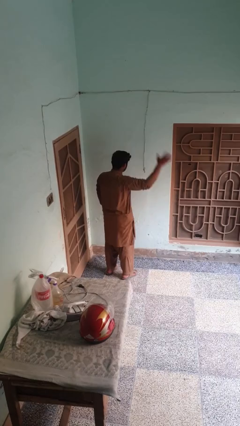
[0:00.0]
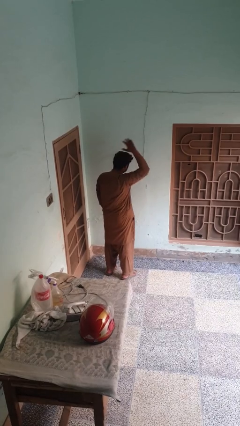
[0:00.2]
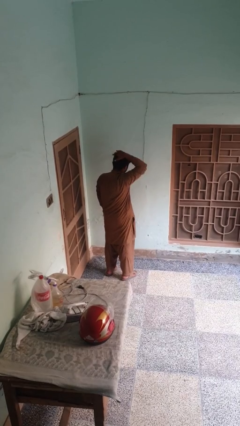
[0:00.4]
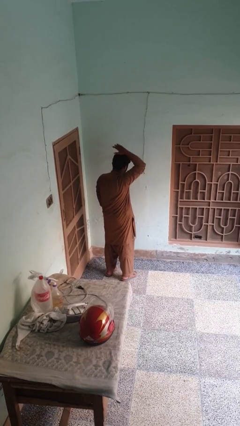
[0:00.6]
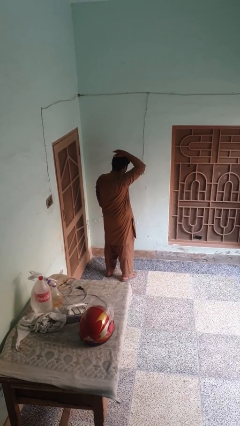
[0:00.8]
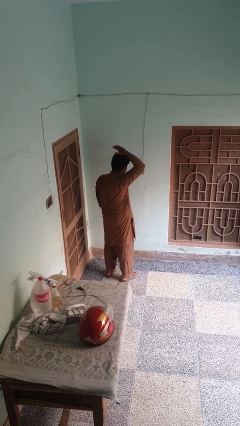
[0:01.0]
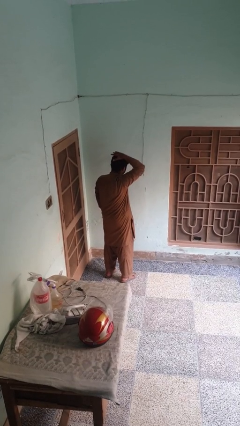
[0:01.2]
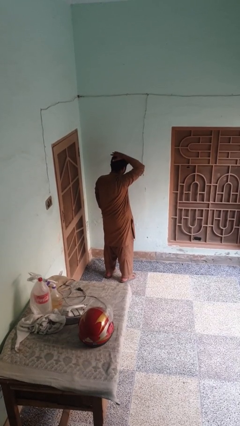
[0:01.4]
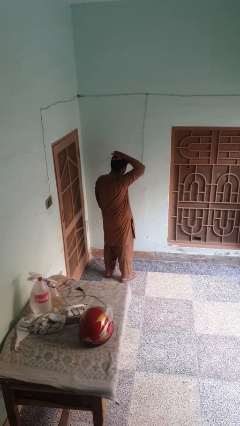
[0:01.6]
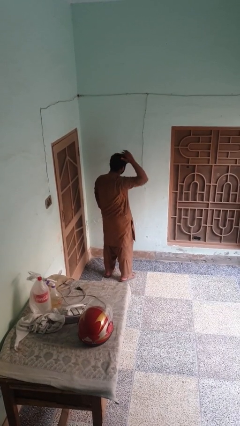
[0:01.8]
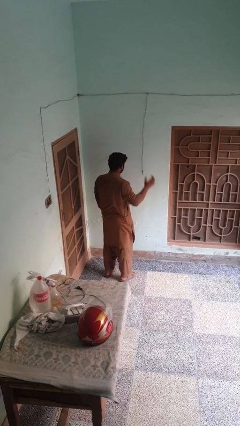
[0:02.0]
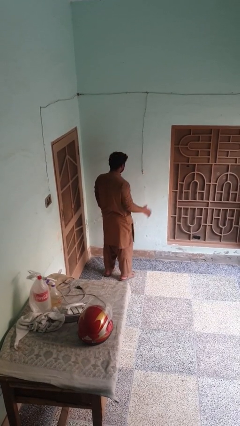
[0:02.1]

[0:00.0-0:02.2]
person pats head

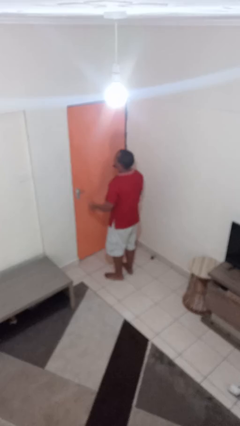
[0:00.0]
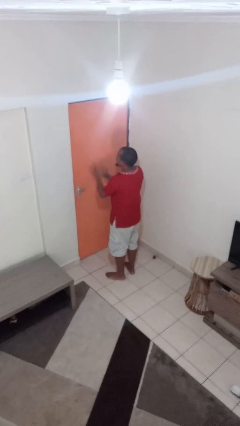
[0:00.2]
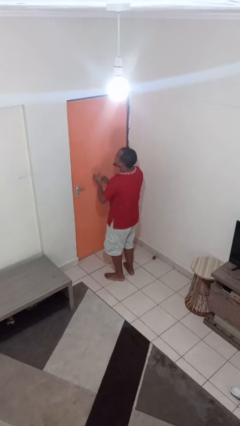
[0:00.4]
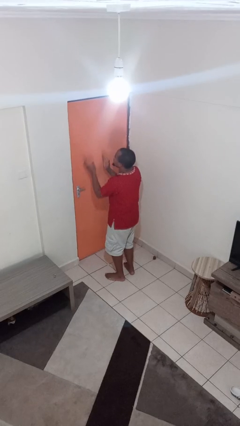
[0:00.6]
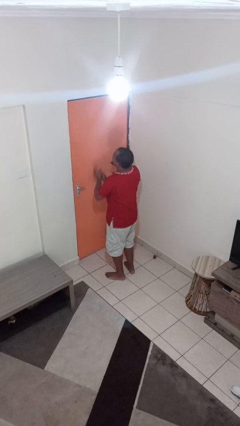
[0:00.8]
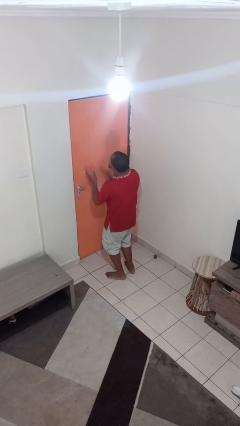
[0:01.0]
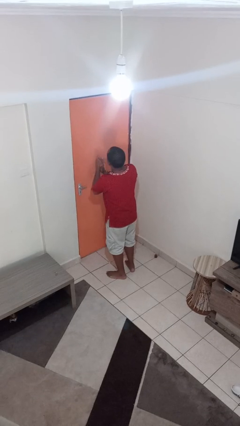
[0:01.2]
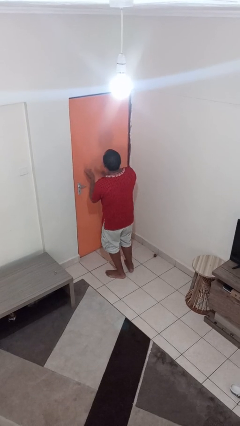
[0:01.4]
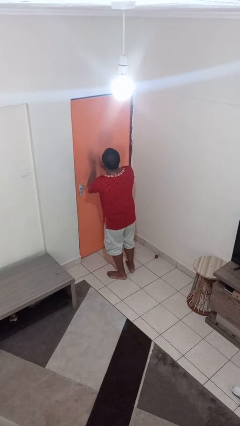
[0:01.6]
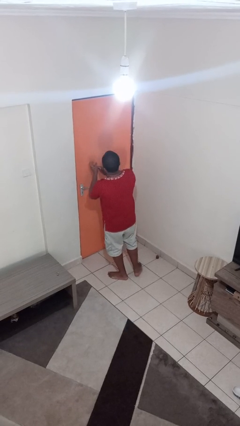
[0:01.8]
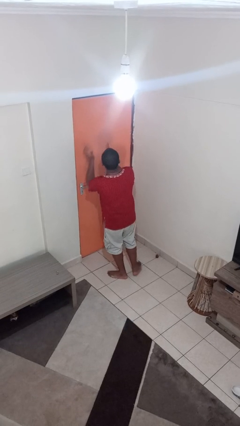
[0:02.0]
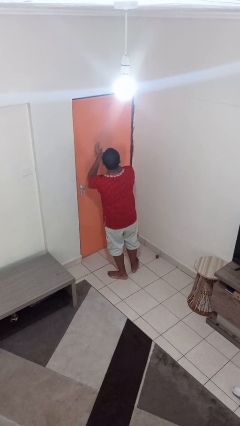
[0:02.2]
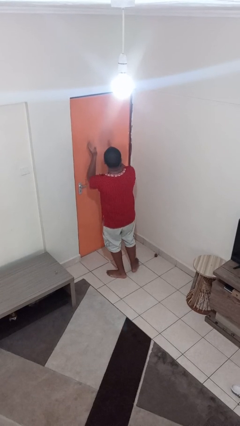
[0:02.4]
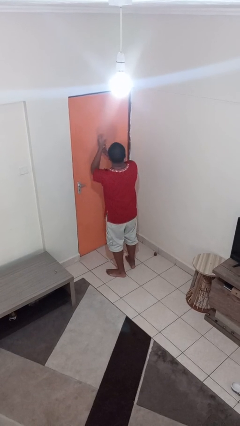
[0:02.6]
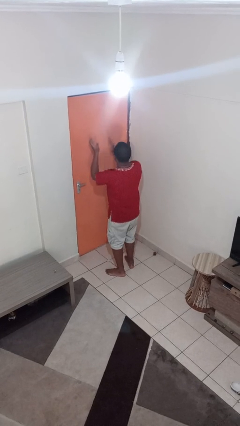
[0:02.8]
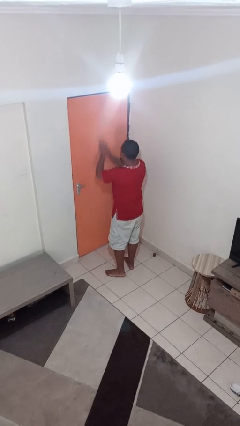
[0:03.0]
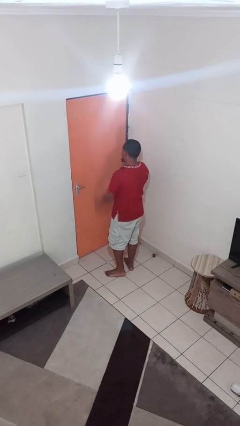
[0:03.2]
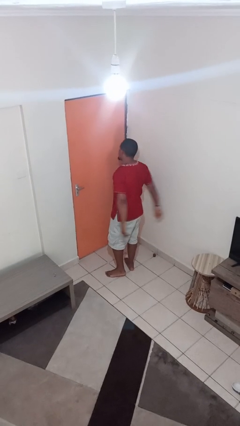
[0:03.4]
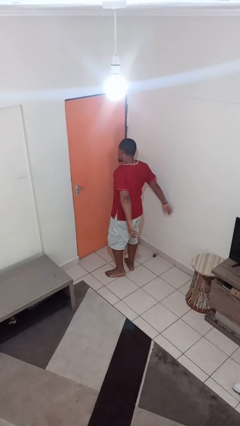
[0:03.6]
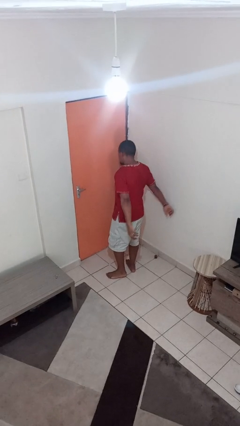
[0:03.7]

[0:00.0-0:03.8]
person claps hands

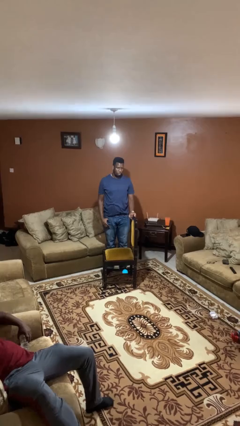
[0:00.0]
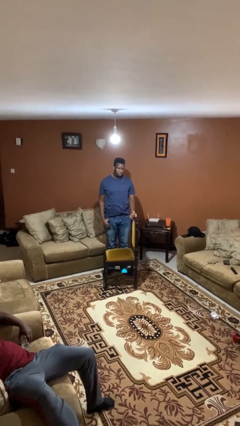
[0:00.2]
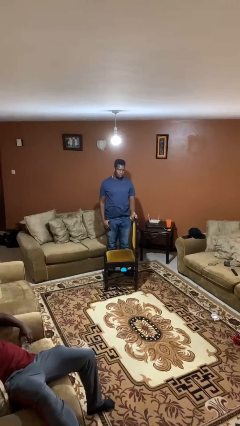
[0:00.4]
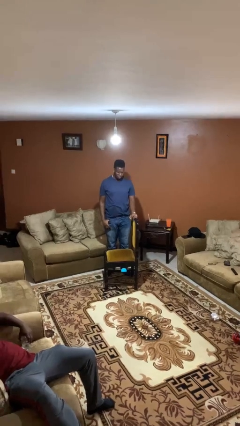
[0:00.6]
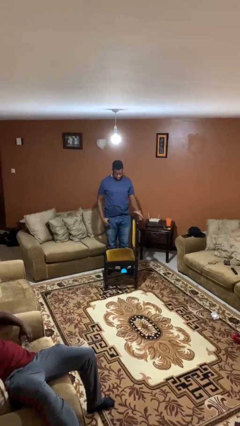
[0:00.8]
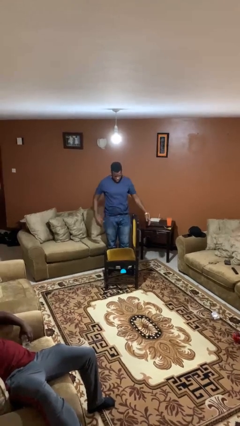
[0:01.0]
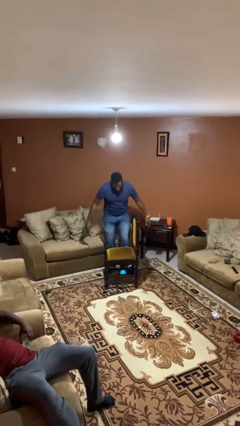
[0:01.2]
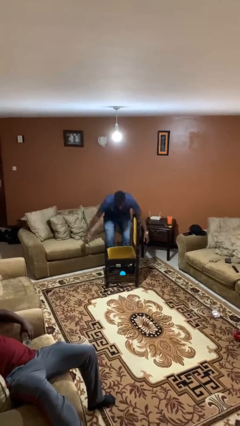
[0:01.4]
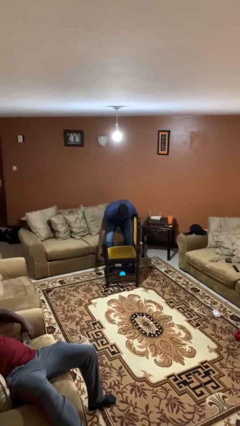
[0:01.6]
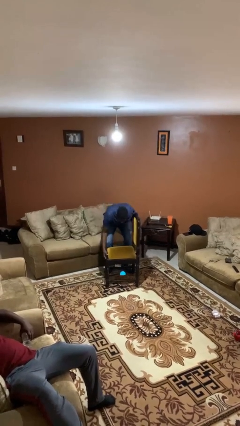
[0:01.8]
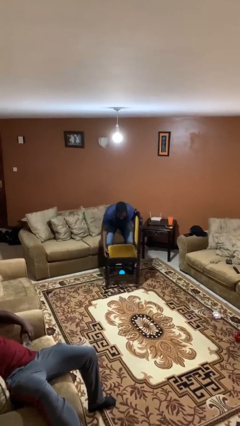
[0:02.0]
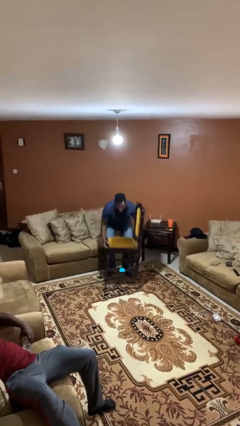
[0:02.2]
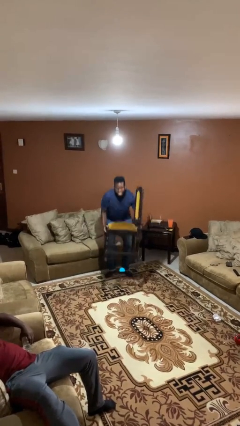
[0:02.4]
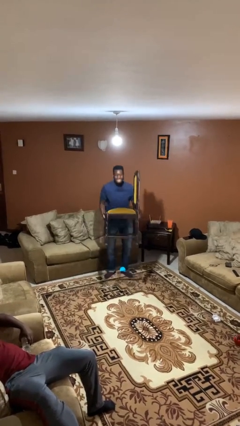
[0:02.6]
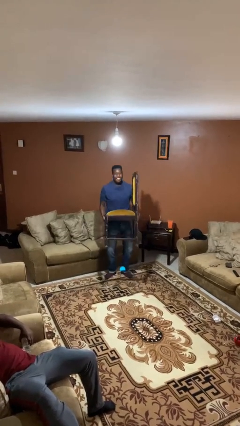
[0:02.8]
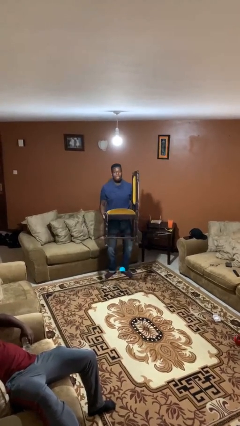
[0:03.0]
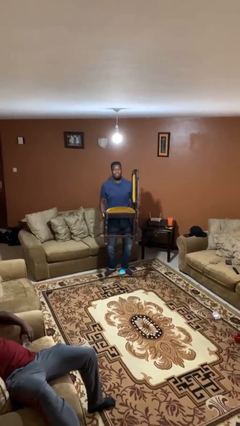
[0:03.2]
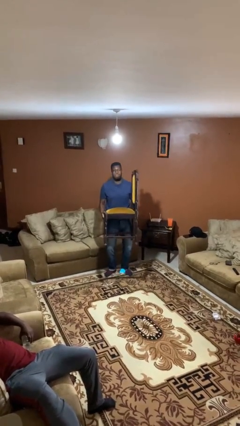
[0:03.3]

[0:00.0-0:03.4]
person picks up object from floor

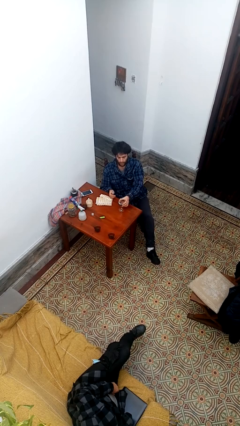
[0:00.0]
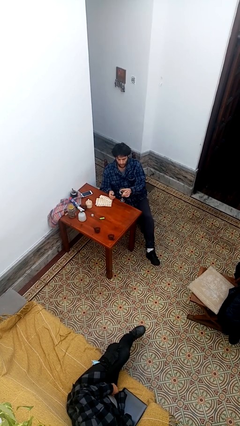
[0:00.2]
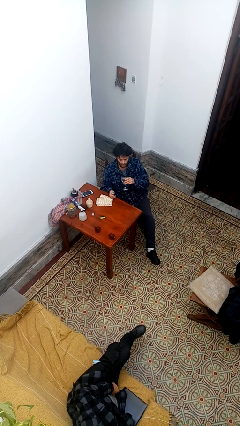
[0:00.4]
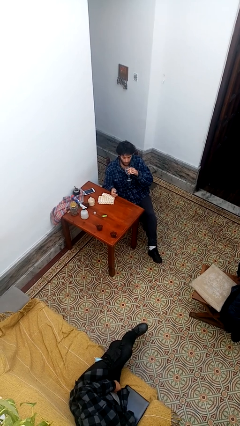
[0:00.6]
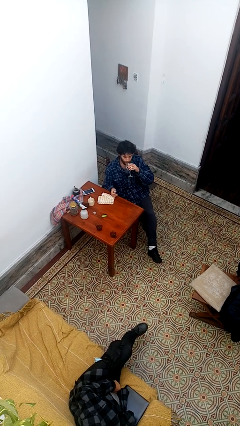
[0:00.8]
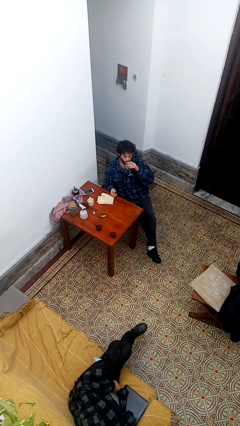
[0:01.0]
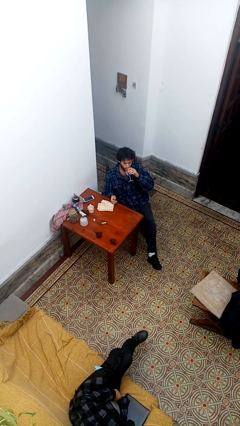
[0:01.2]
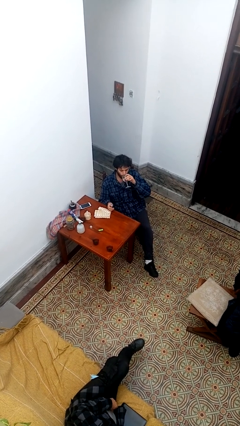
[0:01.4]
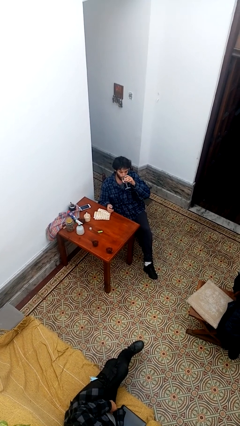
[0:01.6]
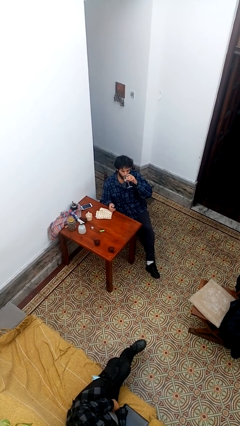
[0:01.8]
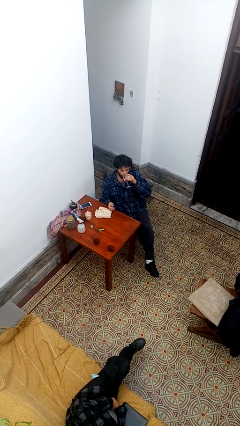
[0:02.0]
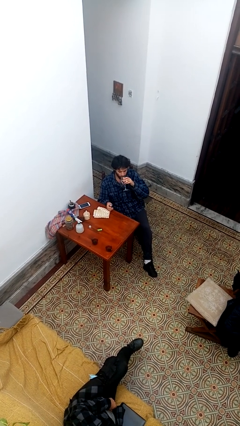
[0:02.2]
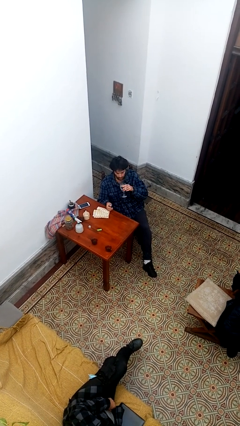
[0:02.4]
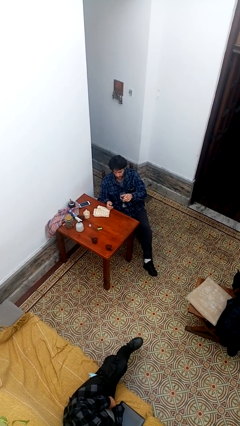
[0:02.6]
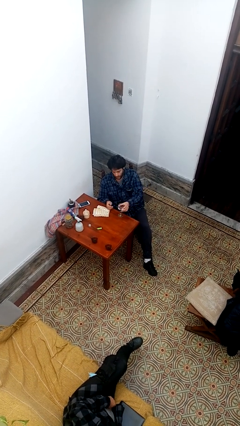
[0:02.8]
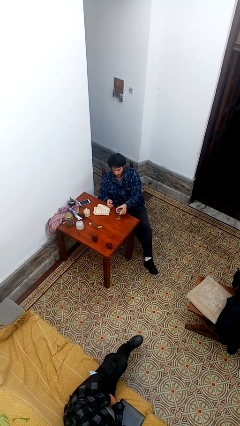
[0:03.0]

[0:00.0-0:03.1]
person drinks from cup

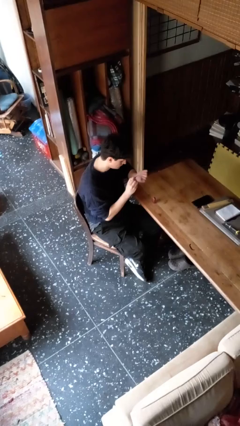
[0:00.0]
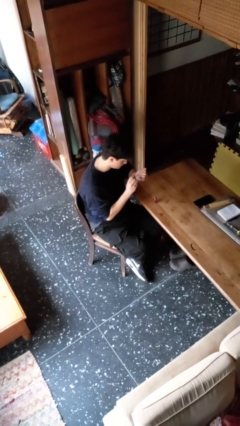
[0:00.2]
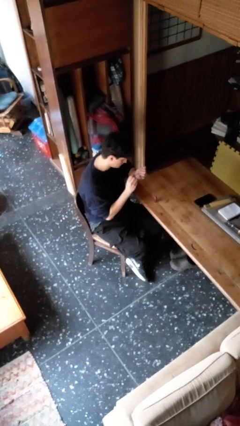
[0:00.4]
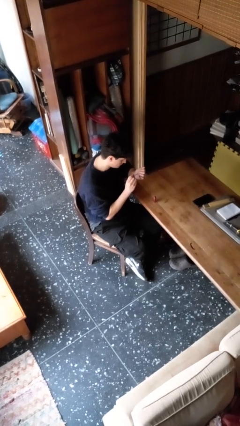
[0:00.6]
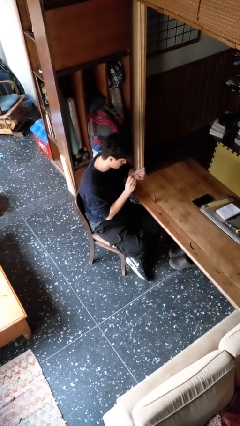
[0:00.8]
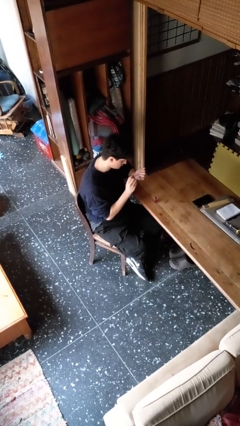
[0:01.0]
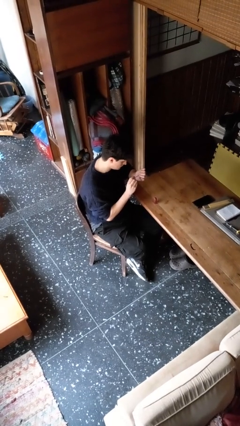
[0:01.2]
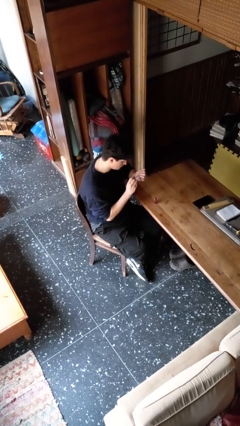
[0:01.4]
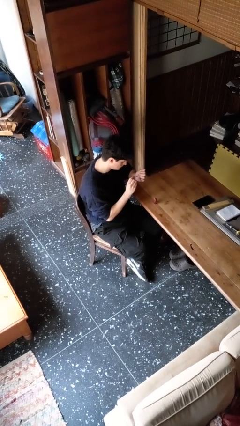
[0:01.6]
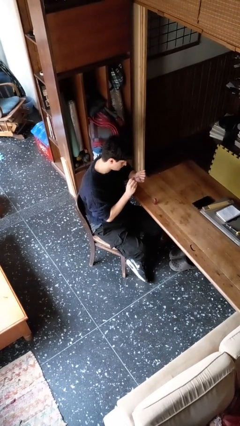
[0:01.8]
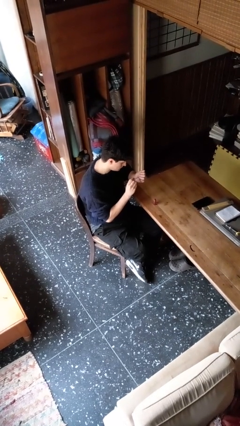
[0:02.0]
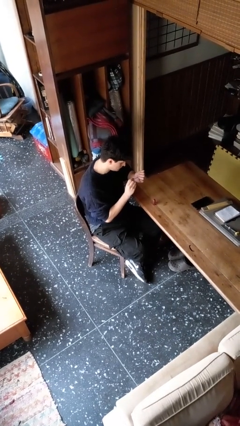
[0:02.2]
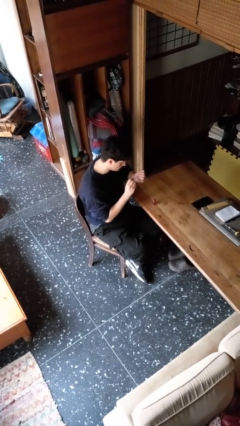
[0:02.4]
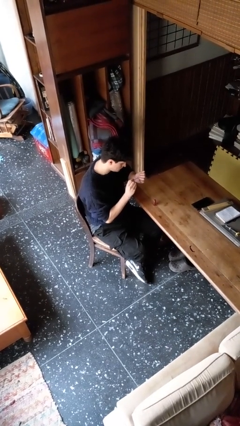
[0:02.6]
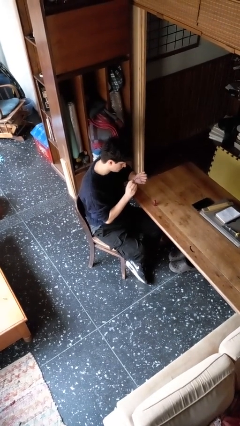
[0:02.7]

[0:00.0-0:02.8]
person paints fingernails

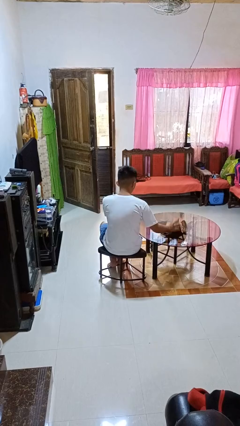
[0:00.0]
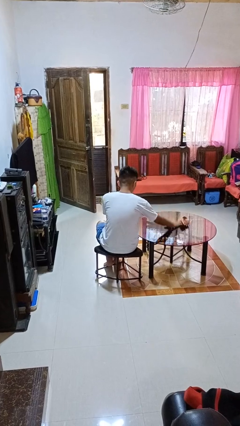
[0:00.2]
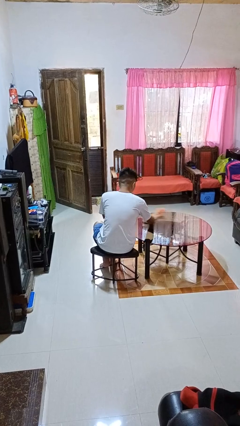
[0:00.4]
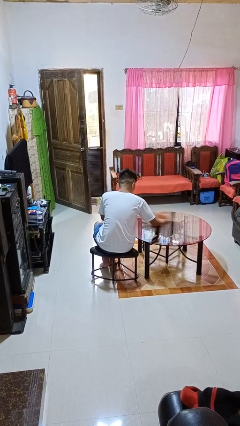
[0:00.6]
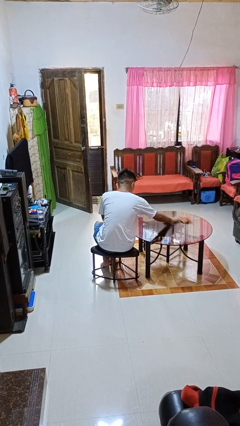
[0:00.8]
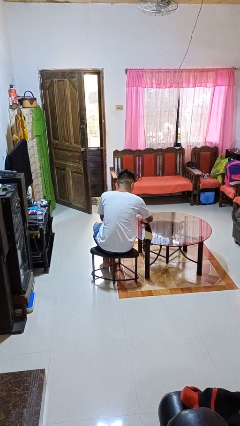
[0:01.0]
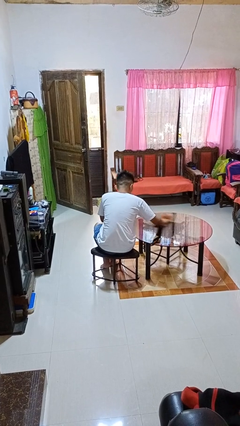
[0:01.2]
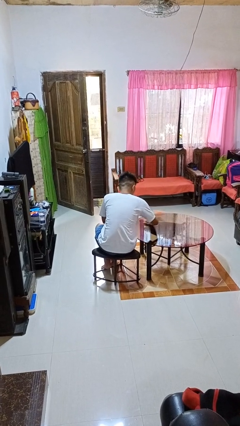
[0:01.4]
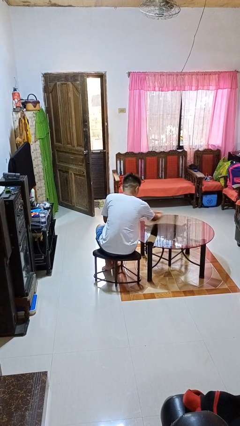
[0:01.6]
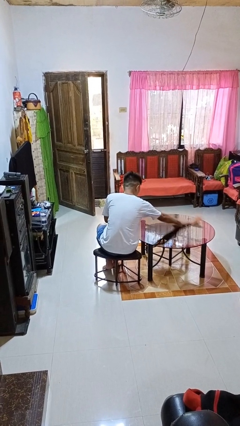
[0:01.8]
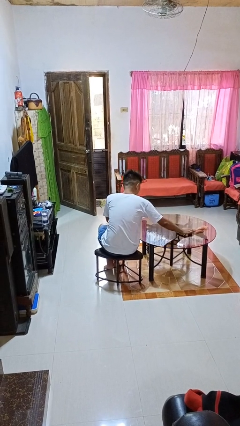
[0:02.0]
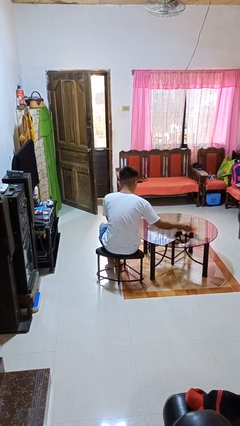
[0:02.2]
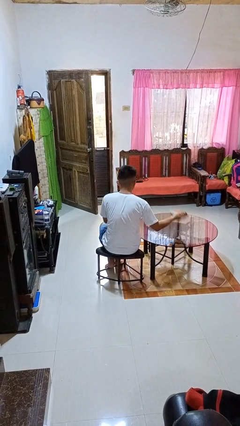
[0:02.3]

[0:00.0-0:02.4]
person cleans table with rag
